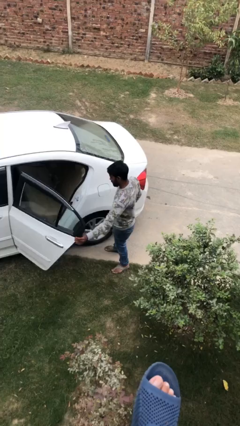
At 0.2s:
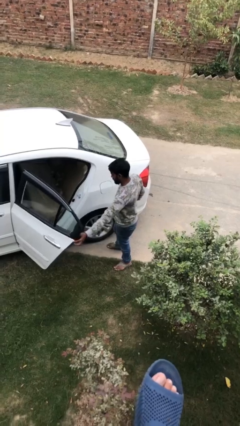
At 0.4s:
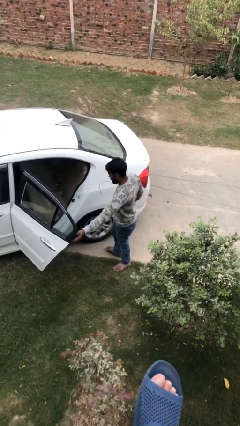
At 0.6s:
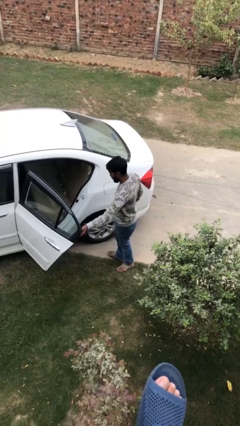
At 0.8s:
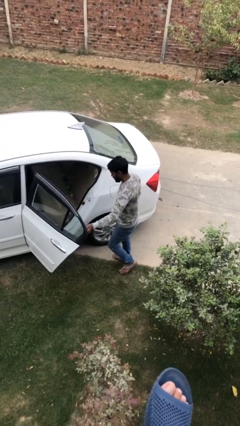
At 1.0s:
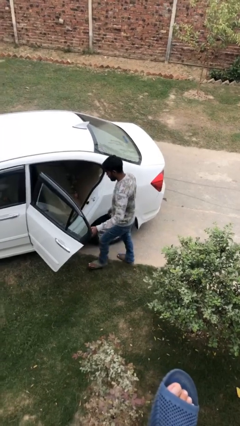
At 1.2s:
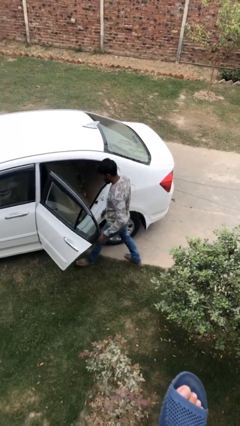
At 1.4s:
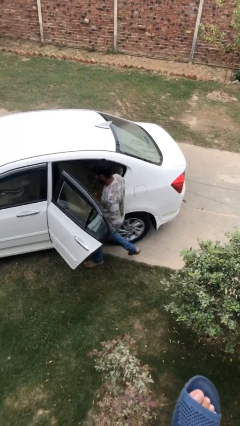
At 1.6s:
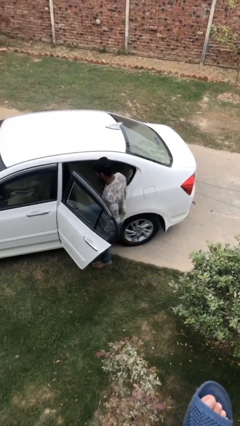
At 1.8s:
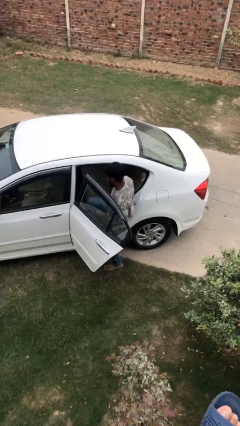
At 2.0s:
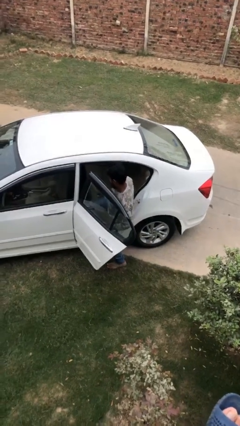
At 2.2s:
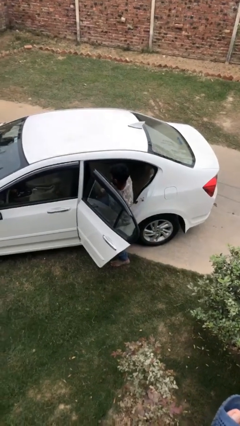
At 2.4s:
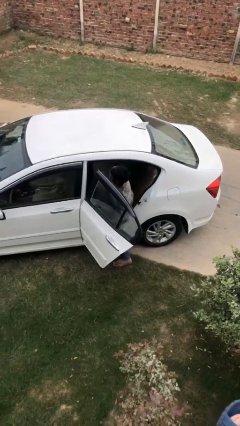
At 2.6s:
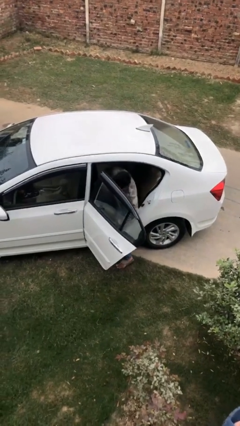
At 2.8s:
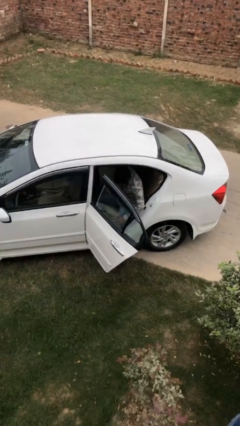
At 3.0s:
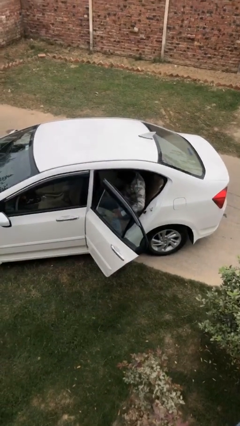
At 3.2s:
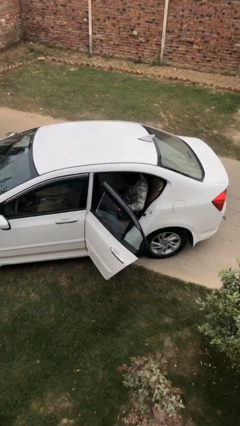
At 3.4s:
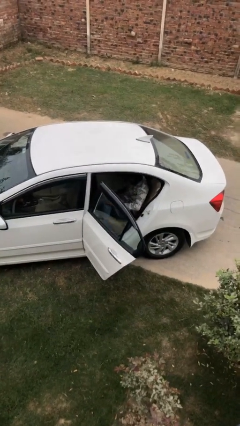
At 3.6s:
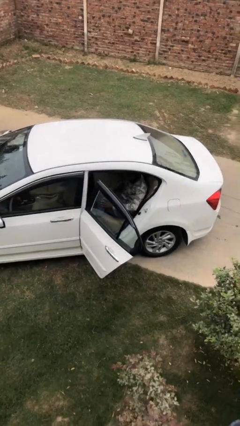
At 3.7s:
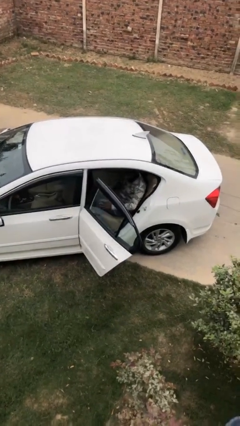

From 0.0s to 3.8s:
person enters car

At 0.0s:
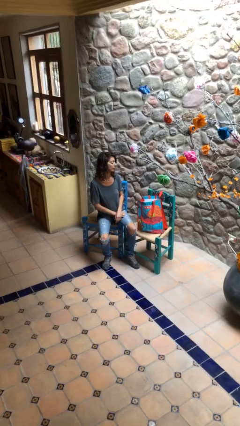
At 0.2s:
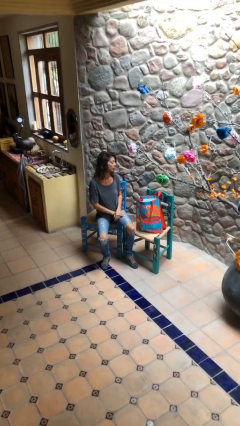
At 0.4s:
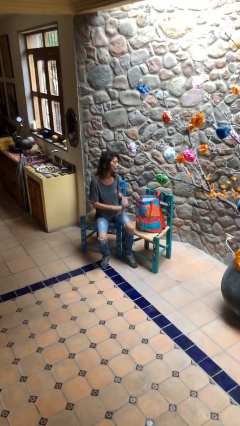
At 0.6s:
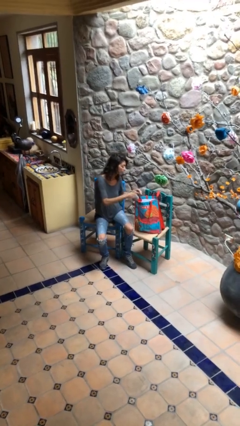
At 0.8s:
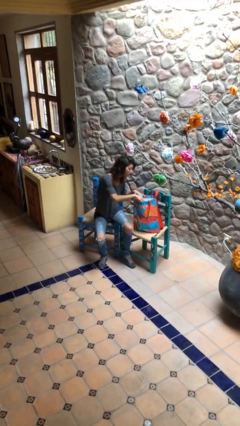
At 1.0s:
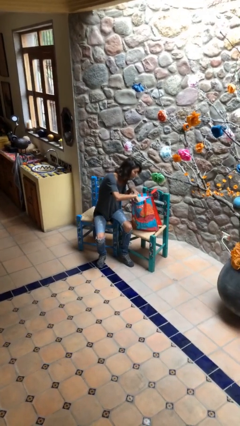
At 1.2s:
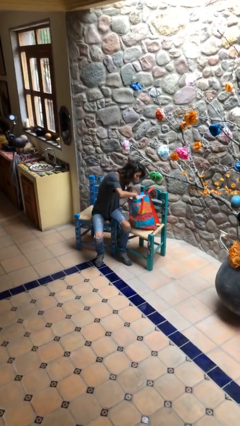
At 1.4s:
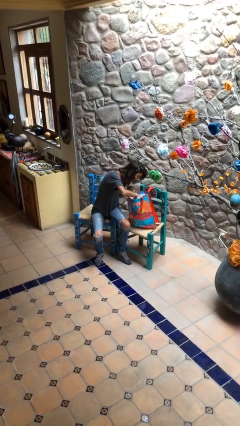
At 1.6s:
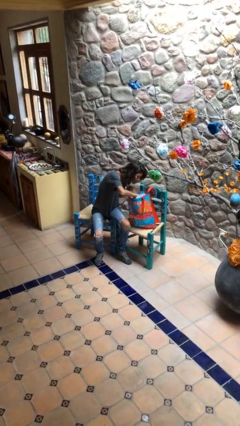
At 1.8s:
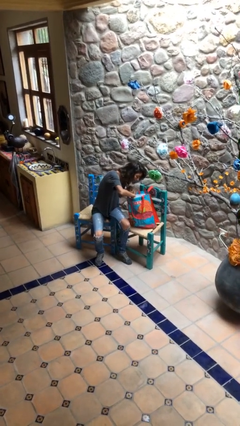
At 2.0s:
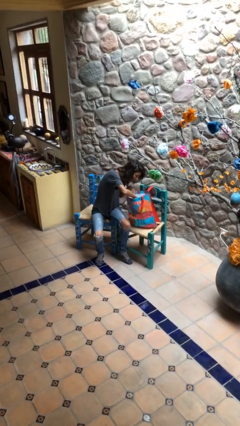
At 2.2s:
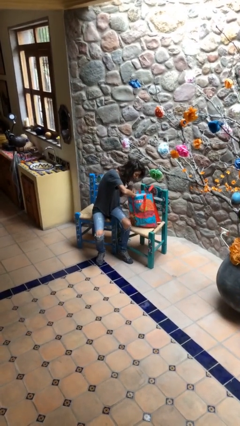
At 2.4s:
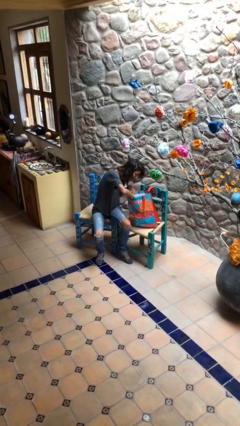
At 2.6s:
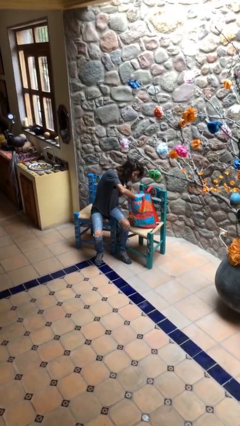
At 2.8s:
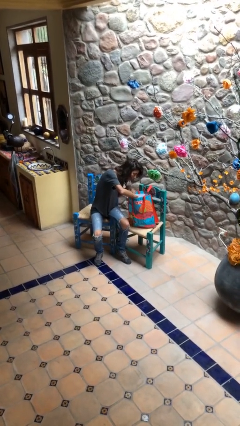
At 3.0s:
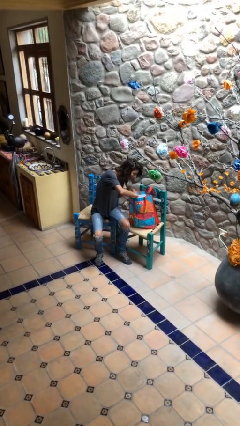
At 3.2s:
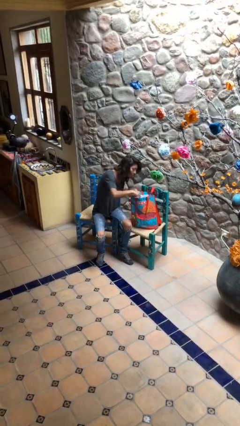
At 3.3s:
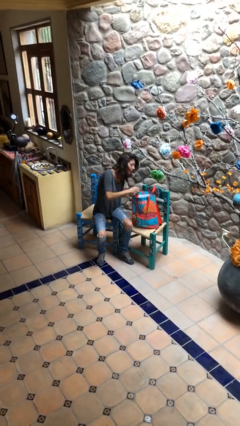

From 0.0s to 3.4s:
person searches in bag

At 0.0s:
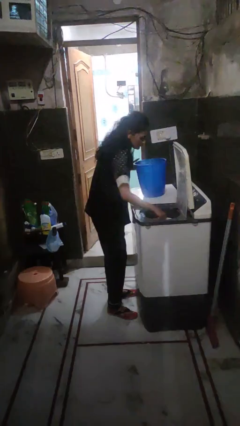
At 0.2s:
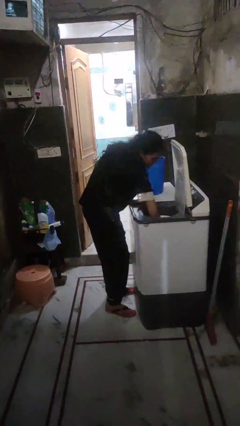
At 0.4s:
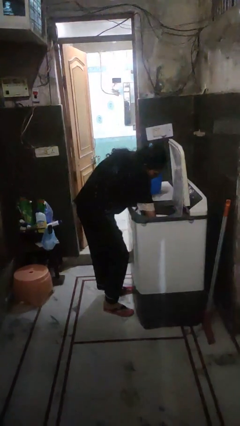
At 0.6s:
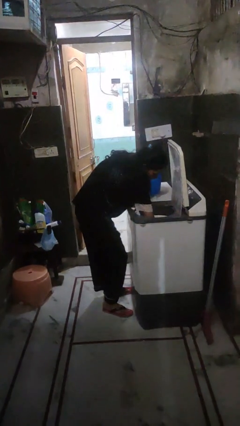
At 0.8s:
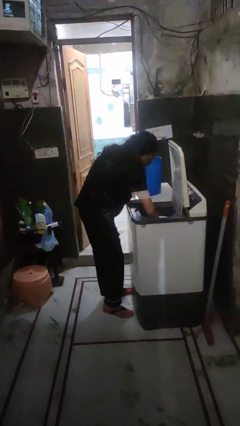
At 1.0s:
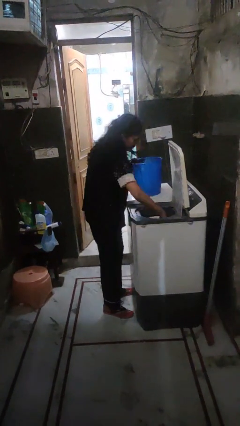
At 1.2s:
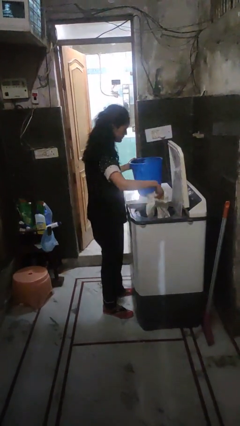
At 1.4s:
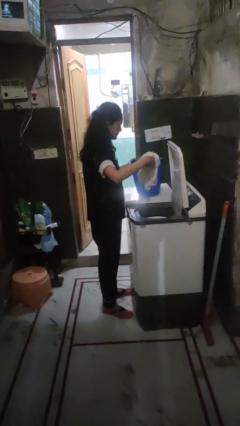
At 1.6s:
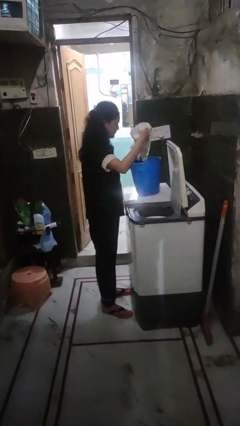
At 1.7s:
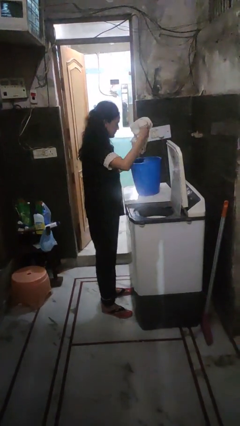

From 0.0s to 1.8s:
person unloads dryer

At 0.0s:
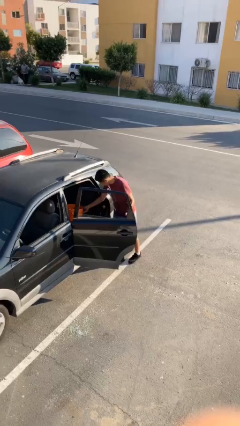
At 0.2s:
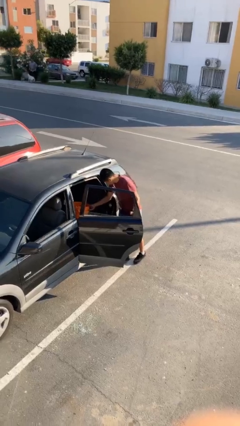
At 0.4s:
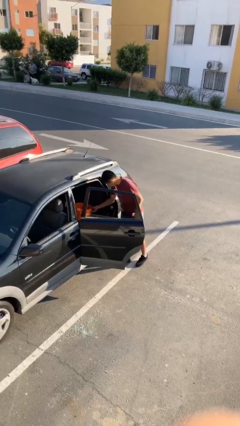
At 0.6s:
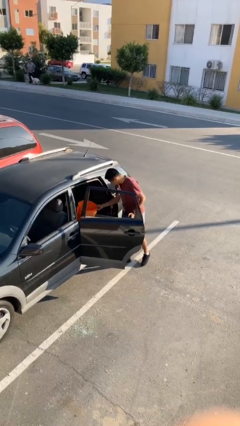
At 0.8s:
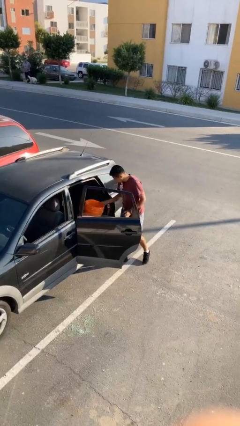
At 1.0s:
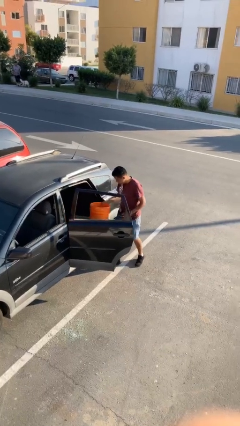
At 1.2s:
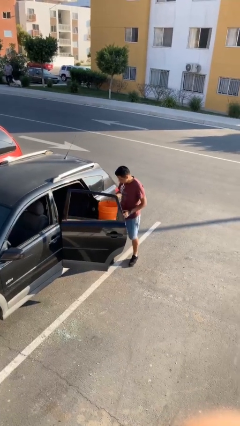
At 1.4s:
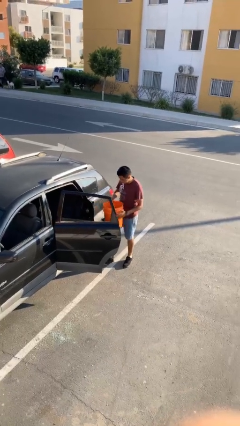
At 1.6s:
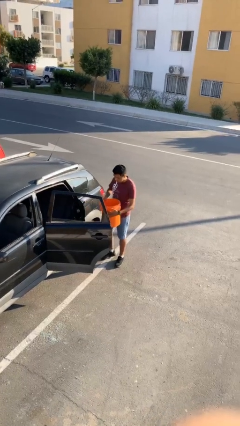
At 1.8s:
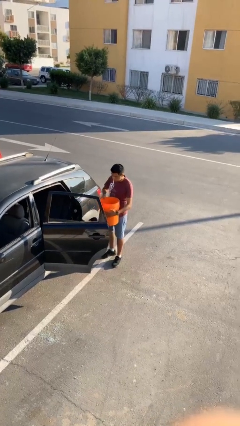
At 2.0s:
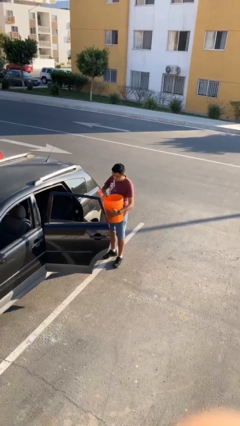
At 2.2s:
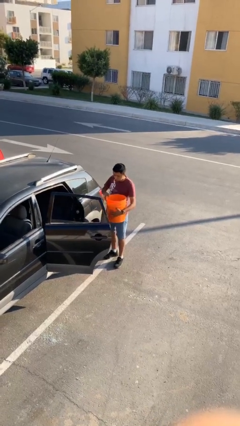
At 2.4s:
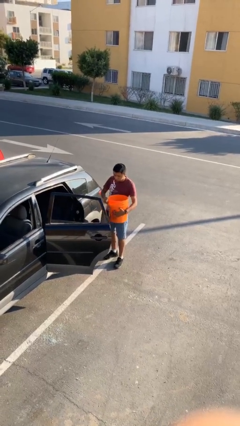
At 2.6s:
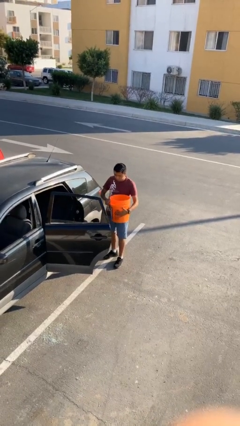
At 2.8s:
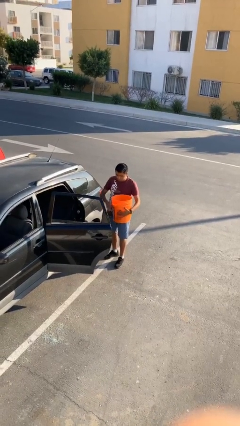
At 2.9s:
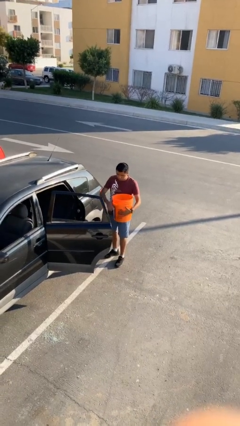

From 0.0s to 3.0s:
person unloads car

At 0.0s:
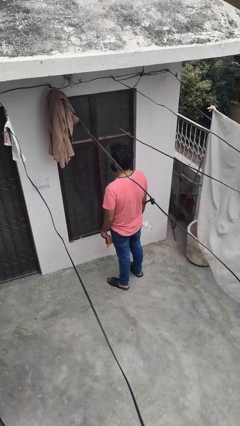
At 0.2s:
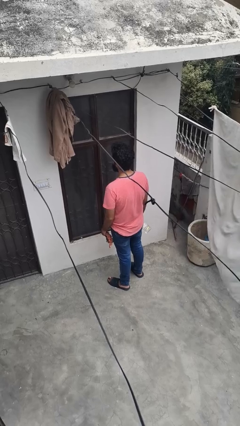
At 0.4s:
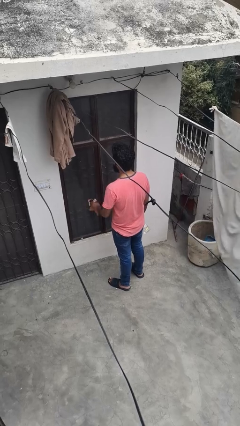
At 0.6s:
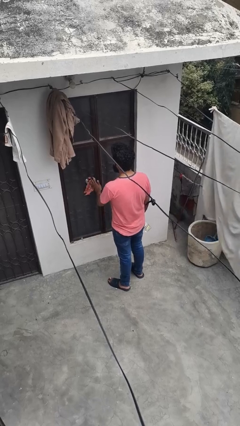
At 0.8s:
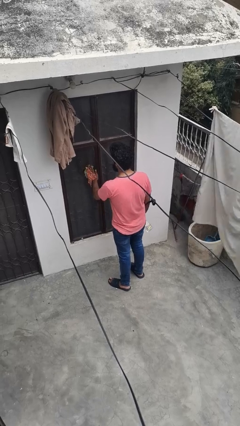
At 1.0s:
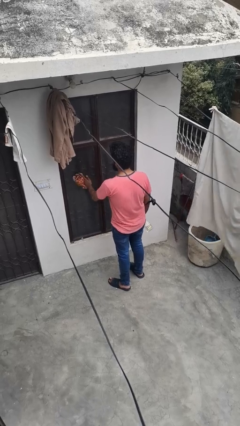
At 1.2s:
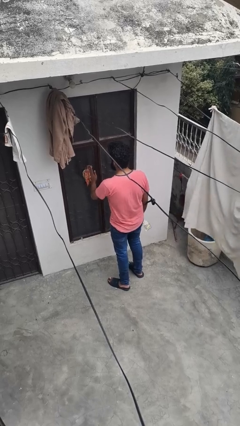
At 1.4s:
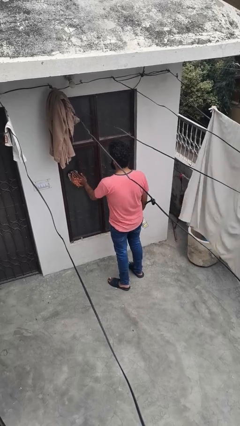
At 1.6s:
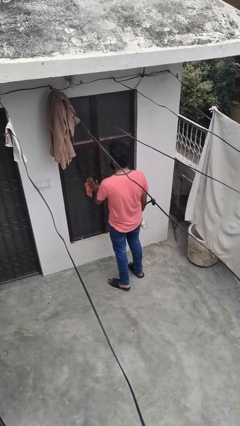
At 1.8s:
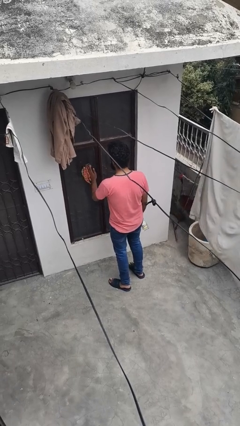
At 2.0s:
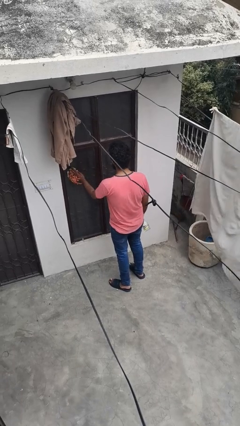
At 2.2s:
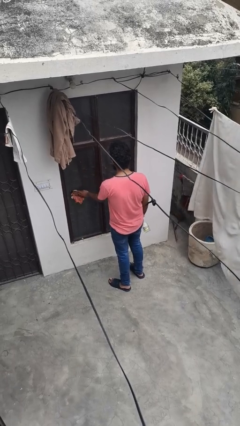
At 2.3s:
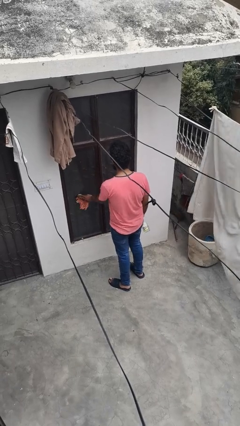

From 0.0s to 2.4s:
person washes window

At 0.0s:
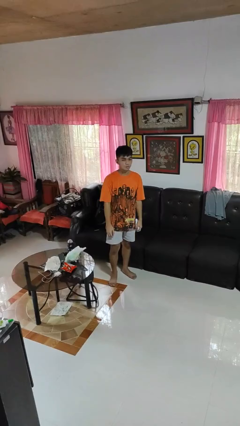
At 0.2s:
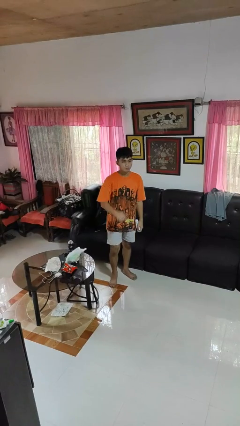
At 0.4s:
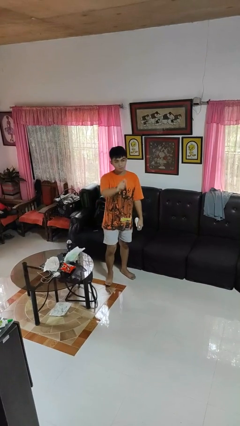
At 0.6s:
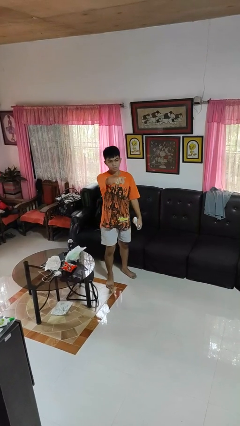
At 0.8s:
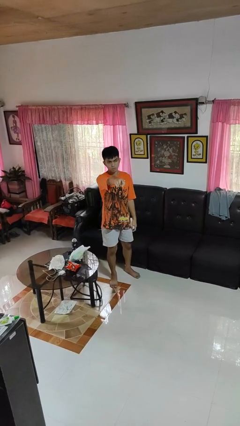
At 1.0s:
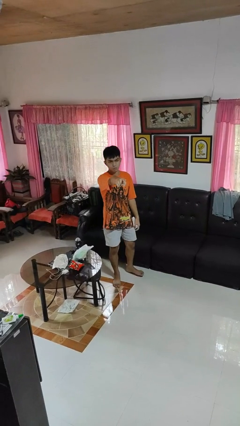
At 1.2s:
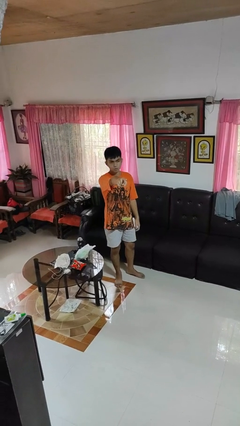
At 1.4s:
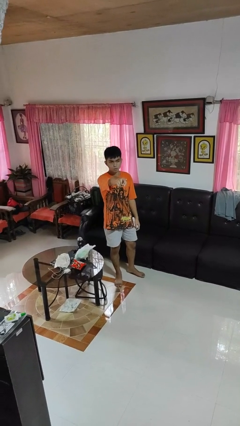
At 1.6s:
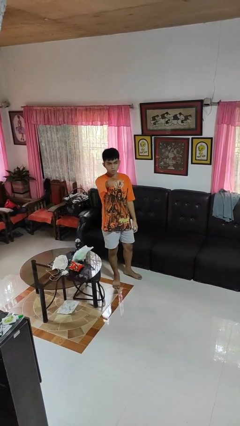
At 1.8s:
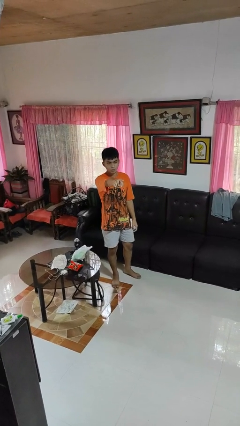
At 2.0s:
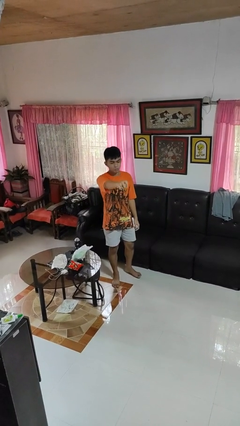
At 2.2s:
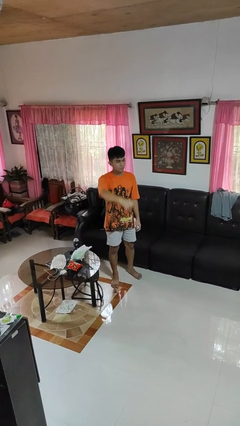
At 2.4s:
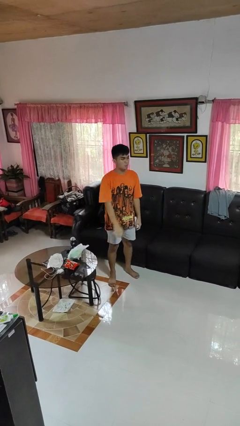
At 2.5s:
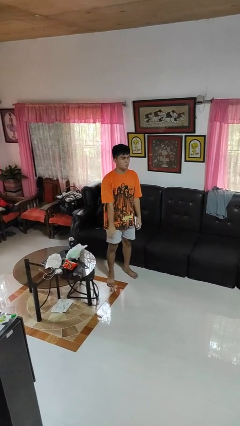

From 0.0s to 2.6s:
person points at person

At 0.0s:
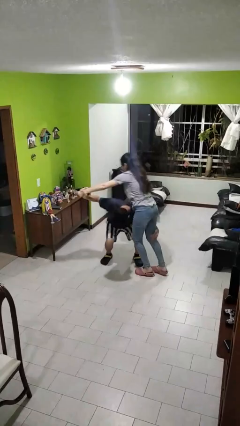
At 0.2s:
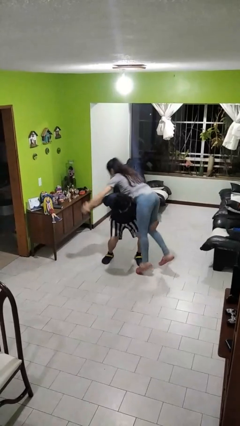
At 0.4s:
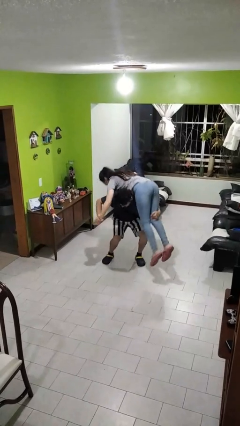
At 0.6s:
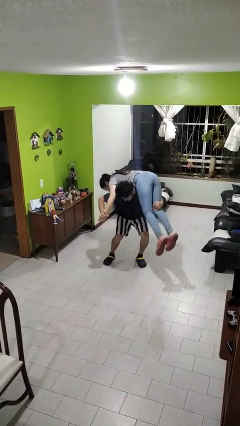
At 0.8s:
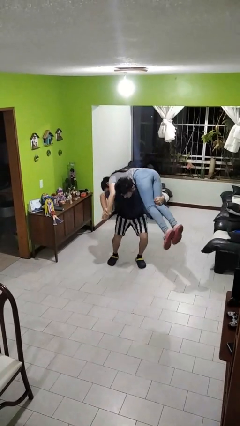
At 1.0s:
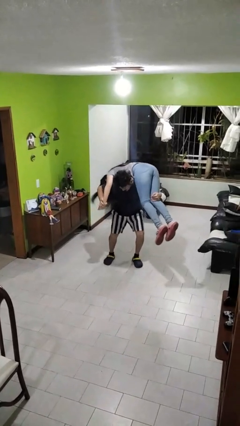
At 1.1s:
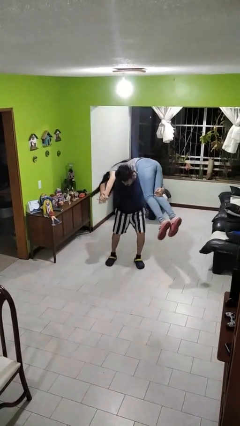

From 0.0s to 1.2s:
person carries person over shoulder
